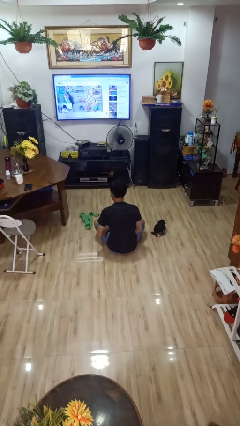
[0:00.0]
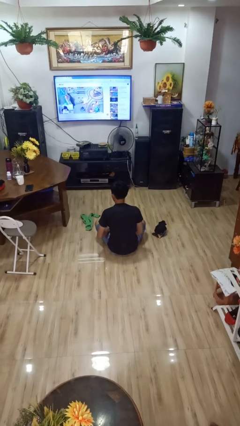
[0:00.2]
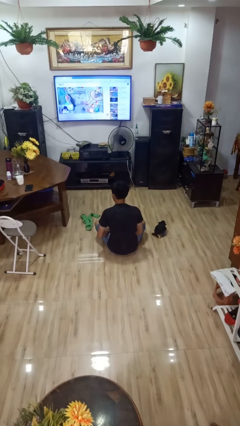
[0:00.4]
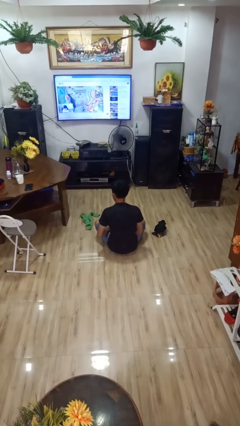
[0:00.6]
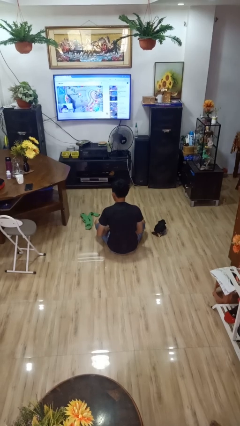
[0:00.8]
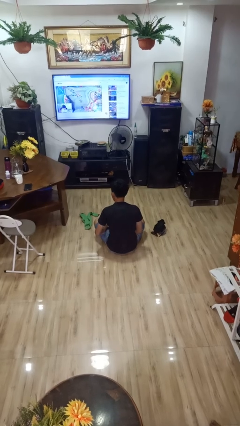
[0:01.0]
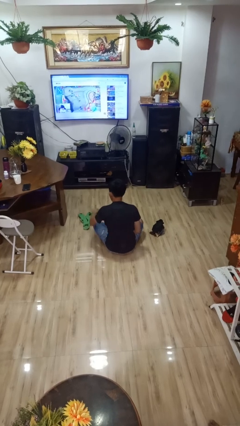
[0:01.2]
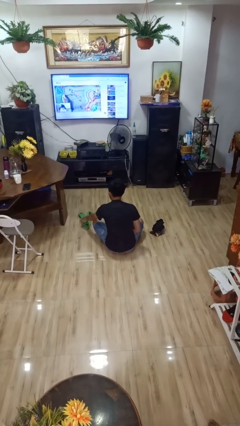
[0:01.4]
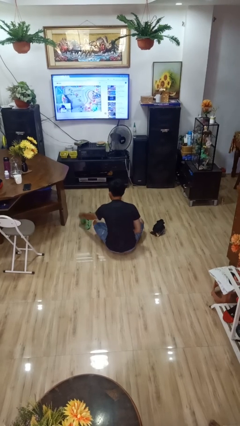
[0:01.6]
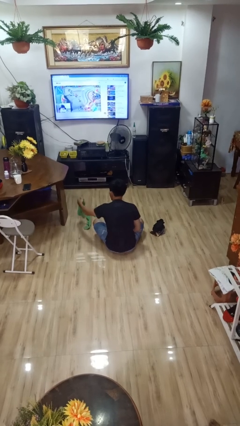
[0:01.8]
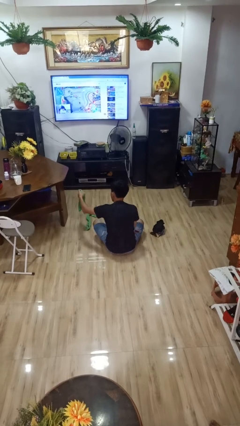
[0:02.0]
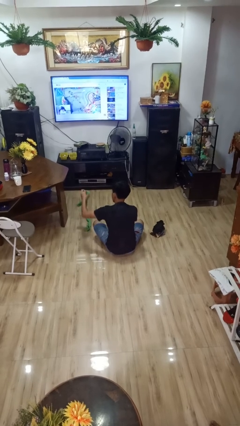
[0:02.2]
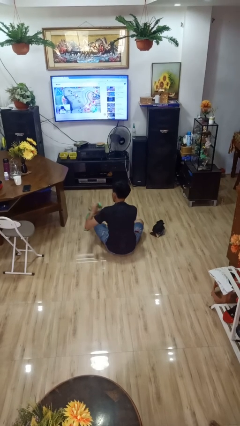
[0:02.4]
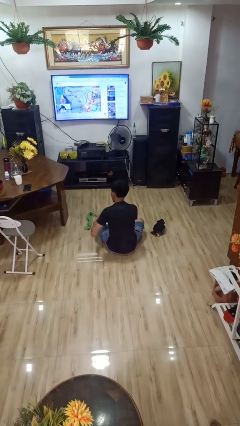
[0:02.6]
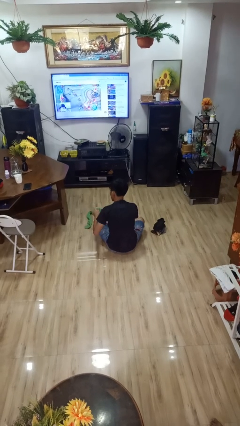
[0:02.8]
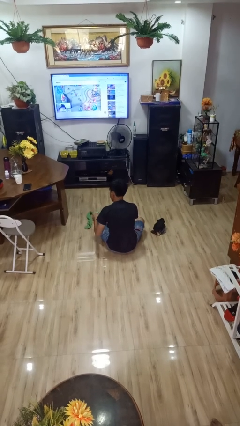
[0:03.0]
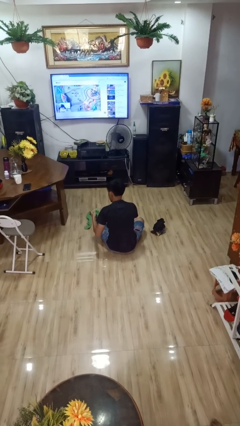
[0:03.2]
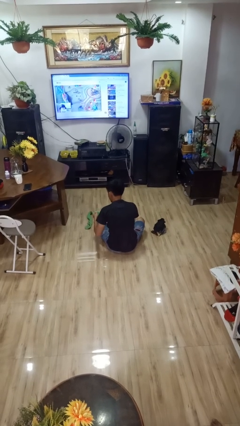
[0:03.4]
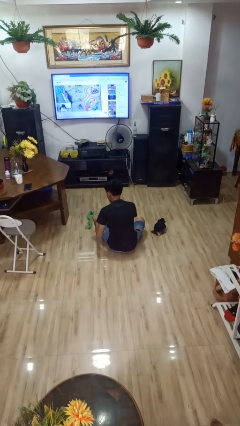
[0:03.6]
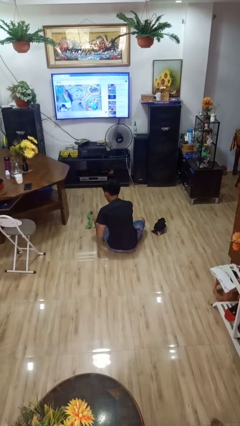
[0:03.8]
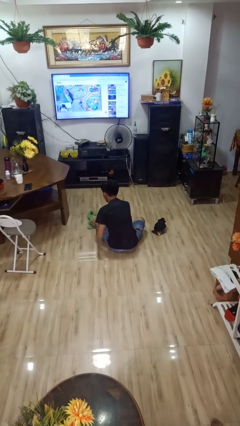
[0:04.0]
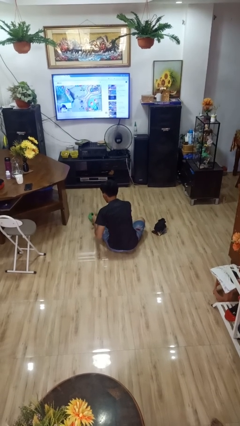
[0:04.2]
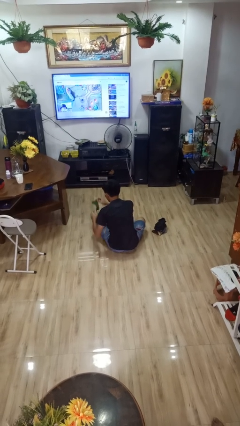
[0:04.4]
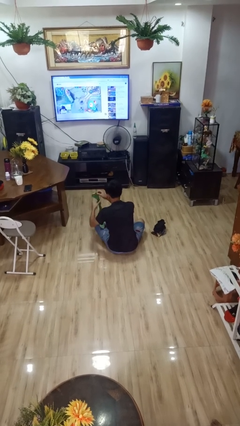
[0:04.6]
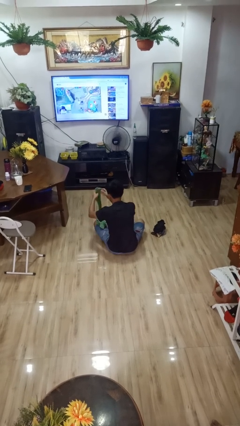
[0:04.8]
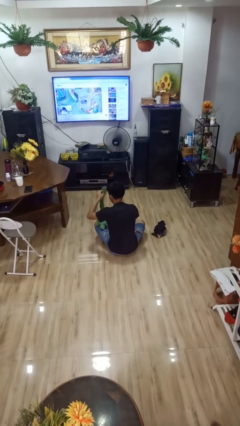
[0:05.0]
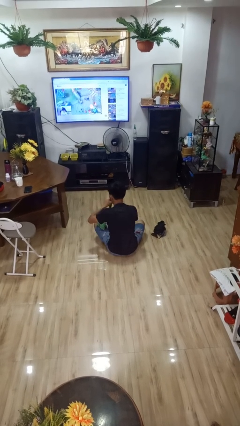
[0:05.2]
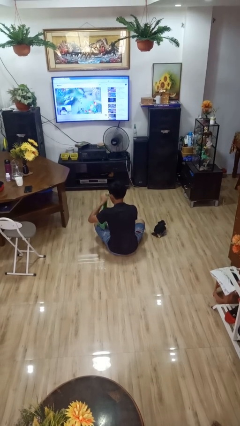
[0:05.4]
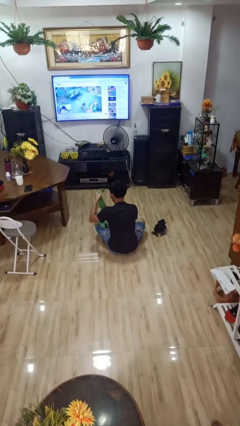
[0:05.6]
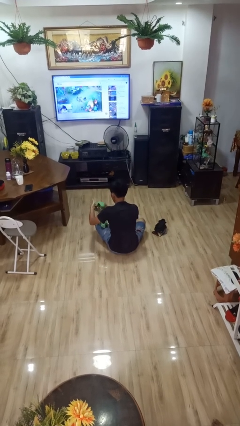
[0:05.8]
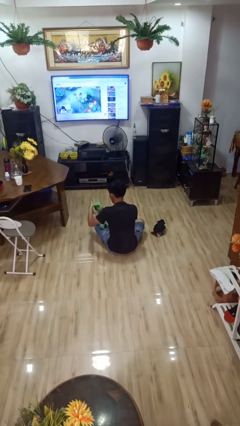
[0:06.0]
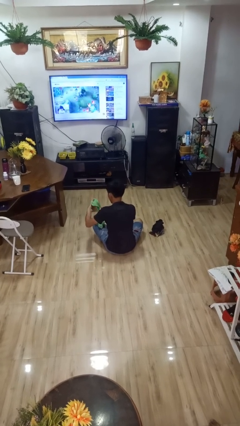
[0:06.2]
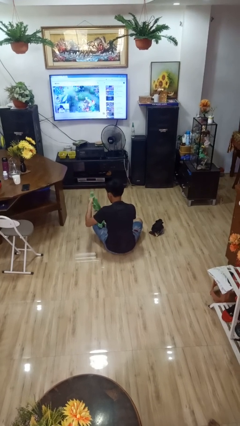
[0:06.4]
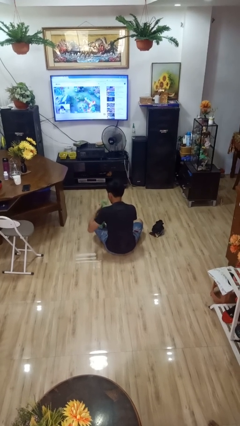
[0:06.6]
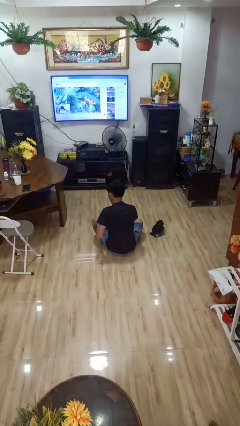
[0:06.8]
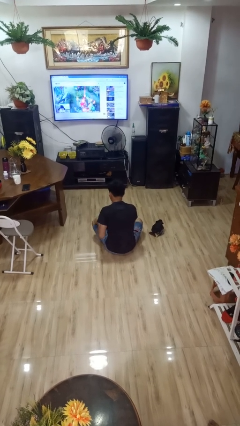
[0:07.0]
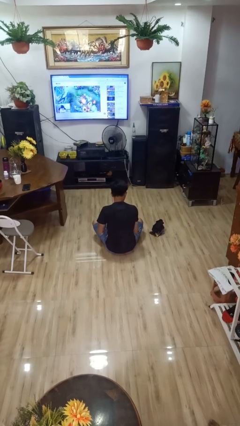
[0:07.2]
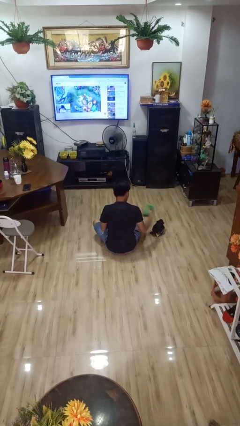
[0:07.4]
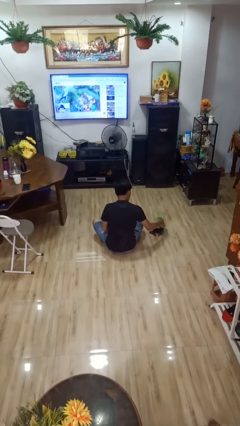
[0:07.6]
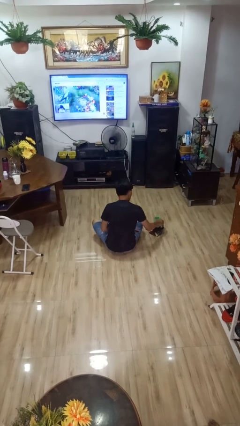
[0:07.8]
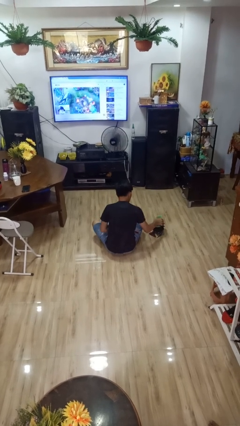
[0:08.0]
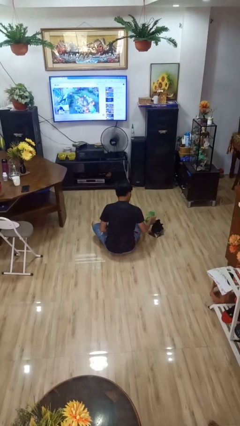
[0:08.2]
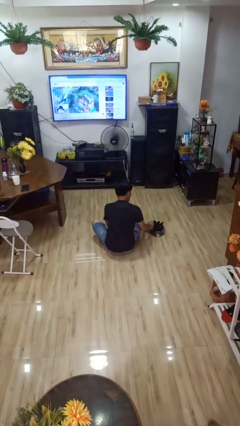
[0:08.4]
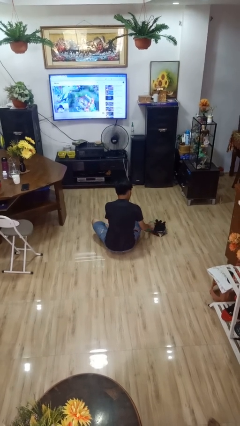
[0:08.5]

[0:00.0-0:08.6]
person folds socks

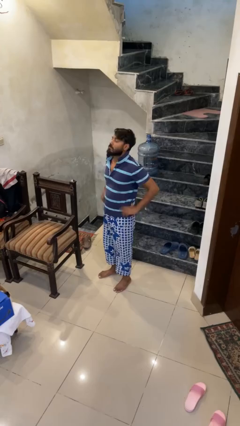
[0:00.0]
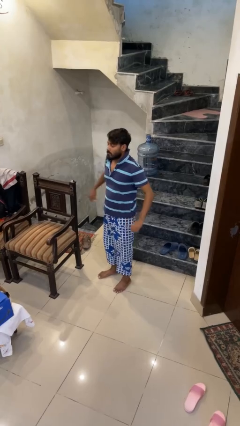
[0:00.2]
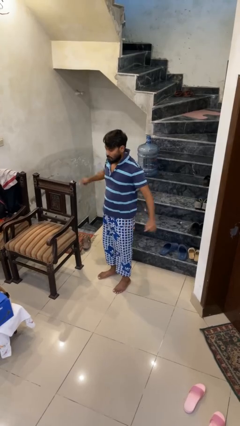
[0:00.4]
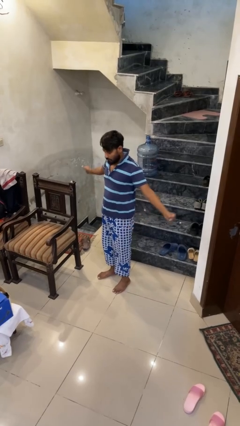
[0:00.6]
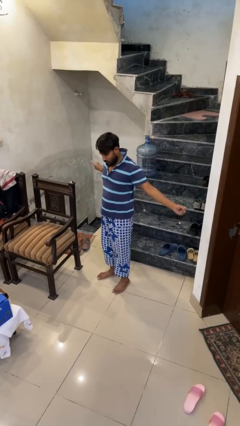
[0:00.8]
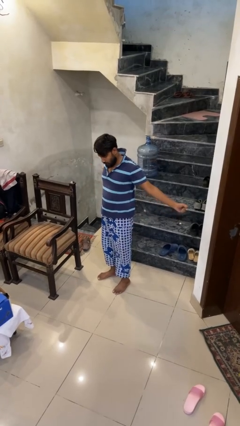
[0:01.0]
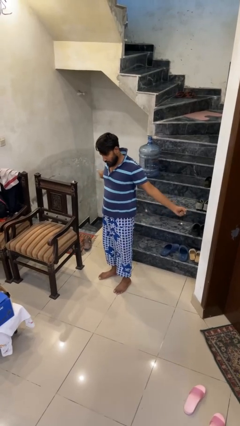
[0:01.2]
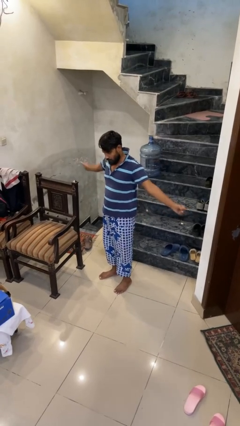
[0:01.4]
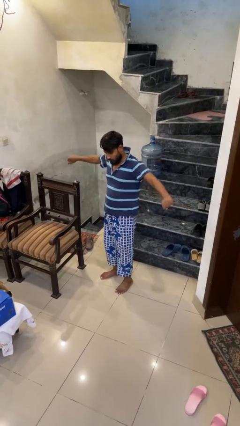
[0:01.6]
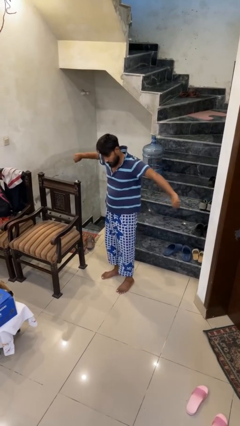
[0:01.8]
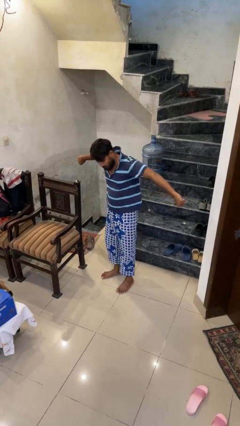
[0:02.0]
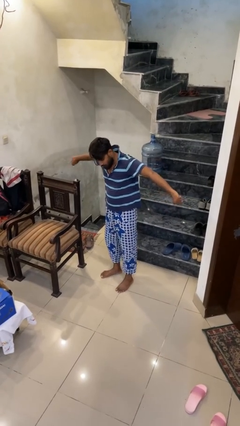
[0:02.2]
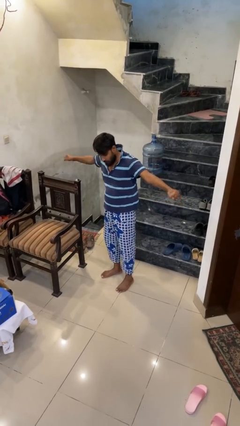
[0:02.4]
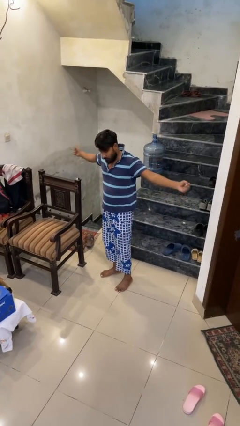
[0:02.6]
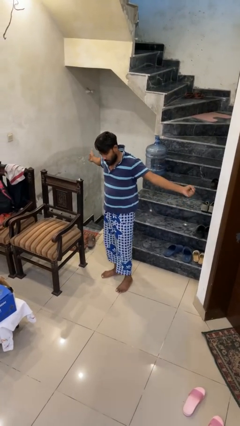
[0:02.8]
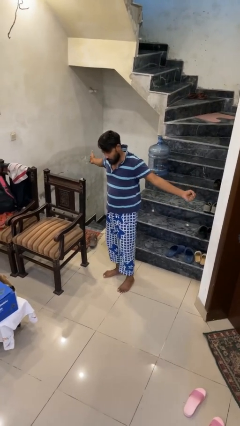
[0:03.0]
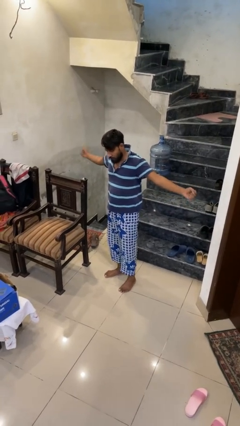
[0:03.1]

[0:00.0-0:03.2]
person stretches arms to side

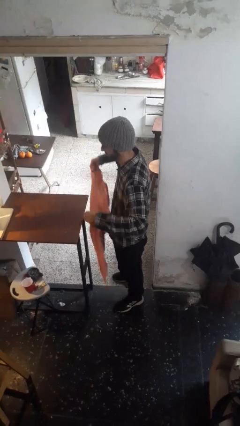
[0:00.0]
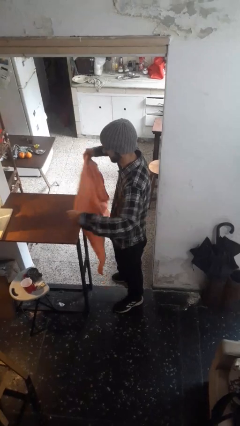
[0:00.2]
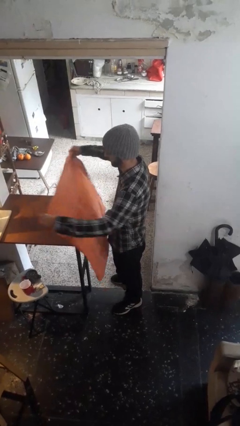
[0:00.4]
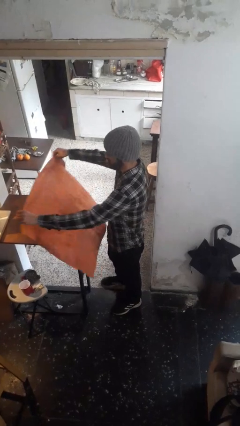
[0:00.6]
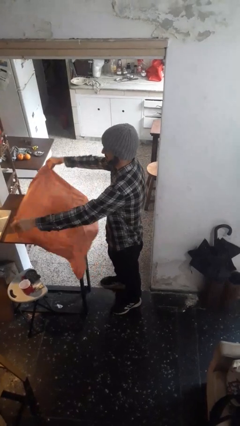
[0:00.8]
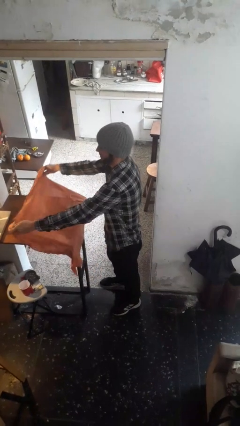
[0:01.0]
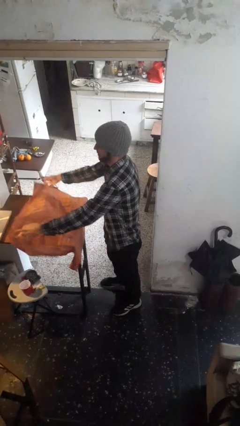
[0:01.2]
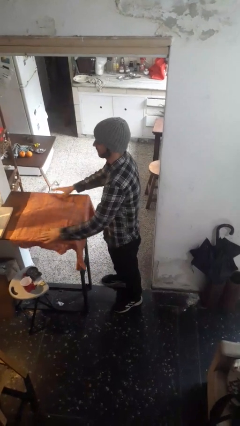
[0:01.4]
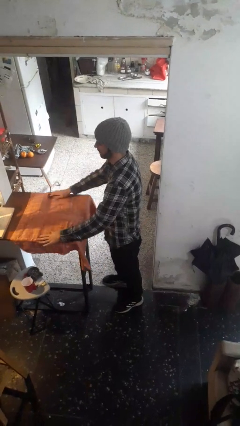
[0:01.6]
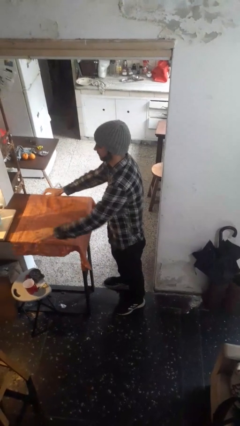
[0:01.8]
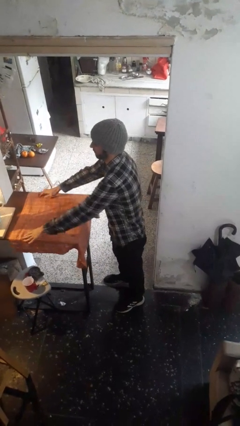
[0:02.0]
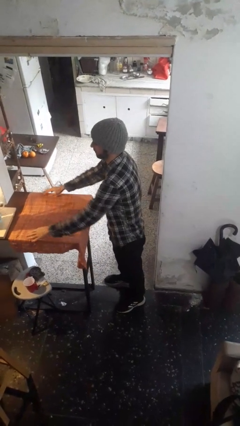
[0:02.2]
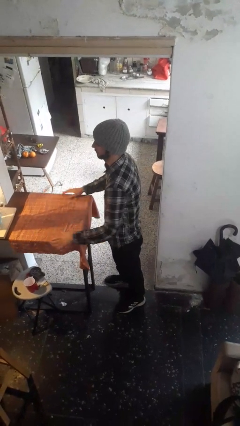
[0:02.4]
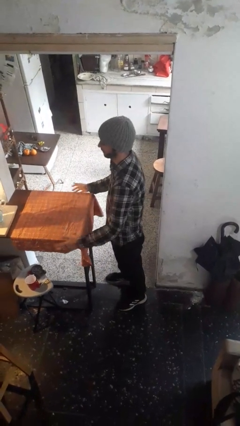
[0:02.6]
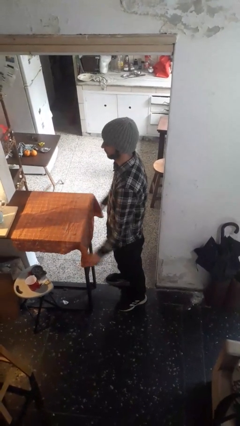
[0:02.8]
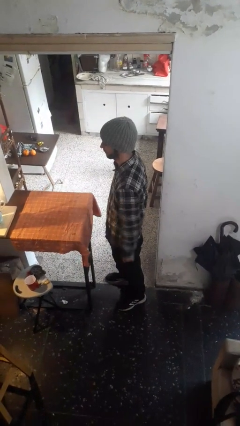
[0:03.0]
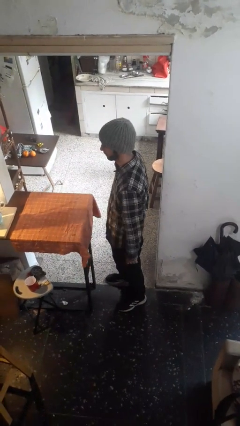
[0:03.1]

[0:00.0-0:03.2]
person spreads tablecloth

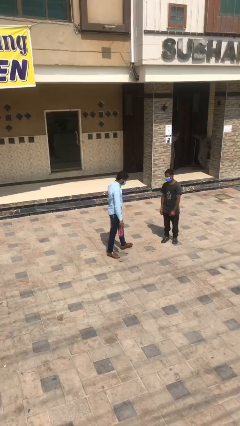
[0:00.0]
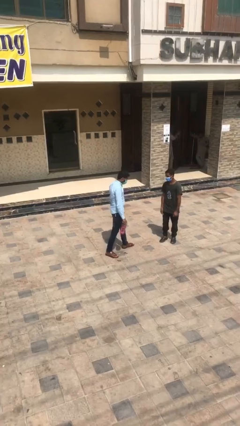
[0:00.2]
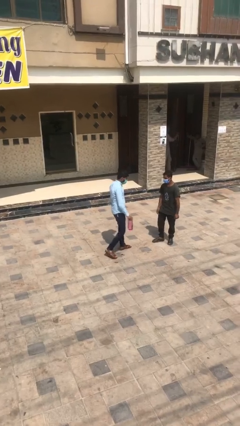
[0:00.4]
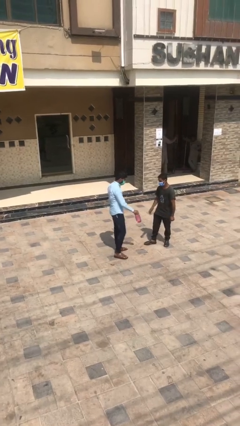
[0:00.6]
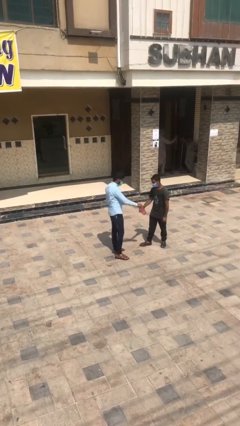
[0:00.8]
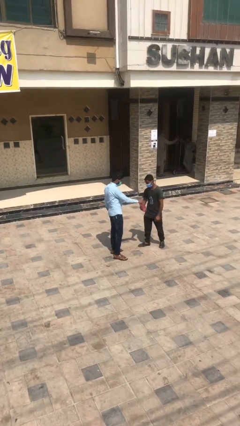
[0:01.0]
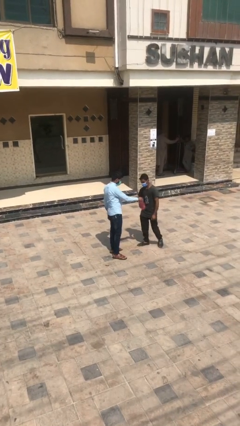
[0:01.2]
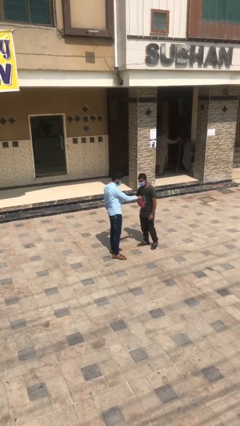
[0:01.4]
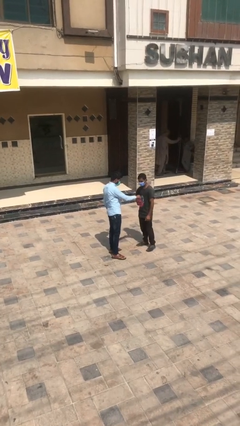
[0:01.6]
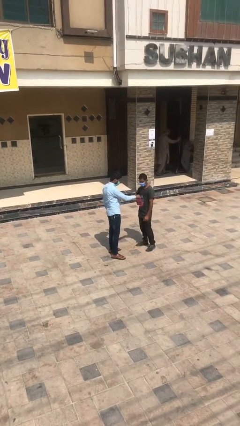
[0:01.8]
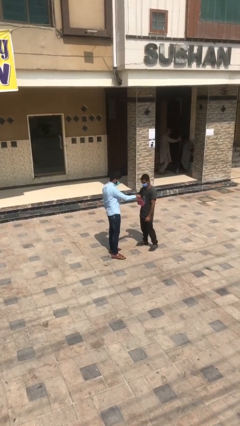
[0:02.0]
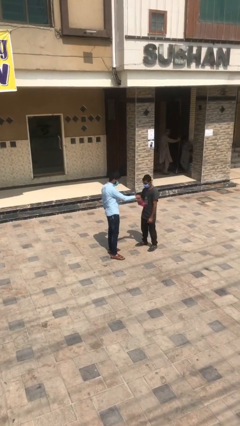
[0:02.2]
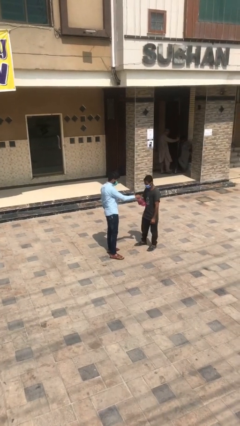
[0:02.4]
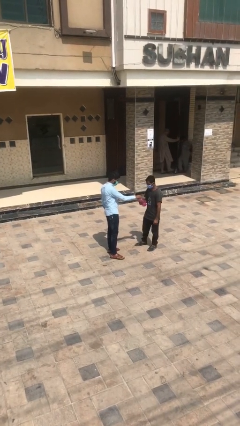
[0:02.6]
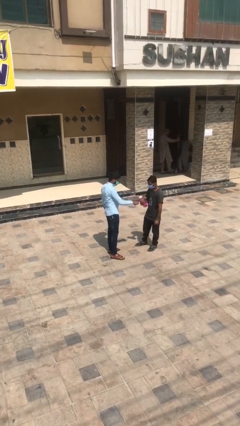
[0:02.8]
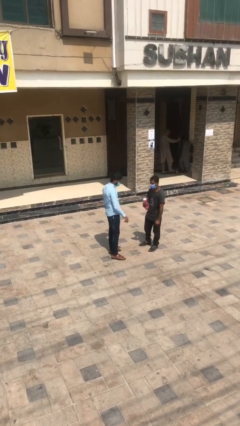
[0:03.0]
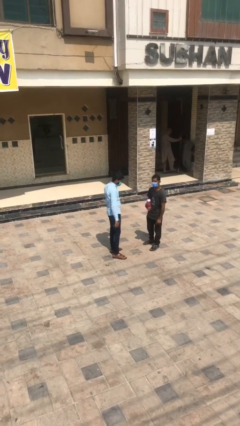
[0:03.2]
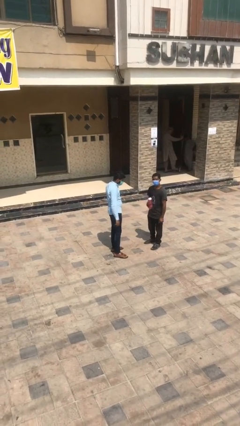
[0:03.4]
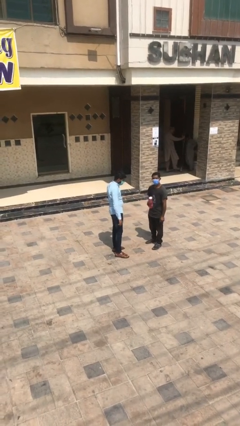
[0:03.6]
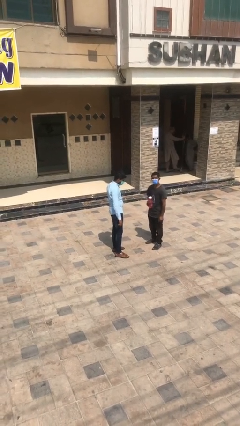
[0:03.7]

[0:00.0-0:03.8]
person transfers object to person
